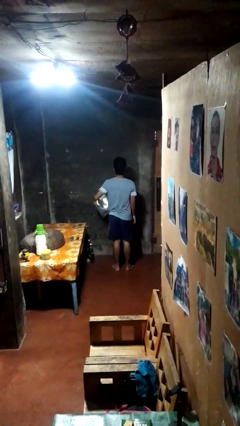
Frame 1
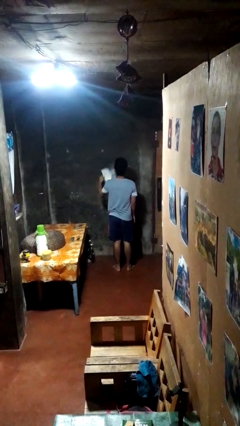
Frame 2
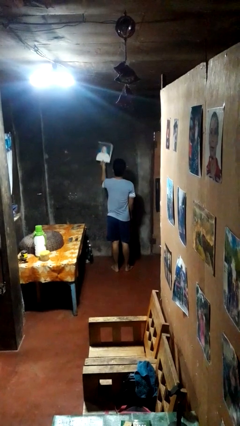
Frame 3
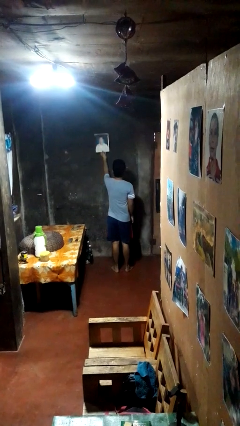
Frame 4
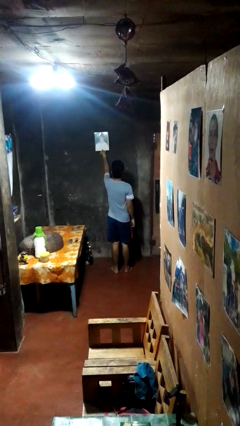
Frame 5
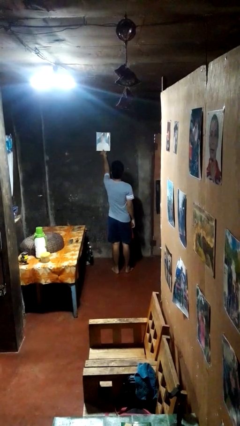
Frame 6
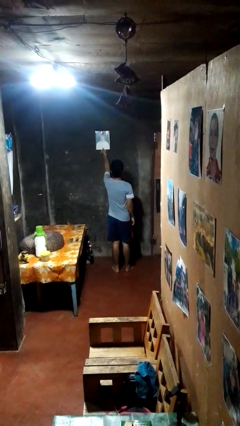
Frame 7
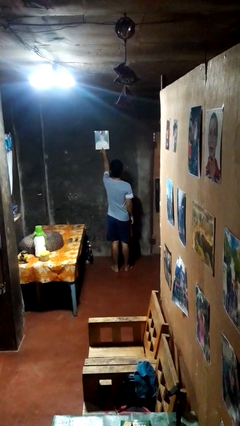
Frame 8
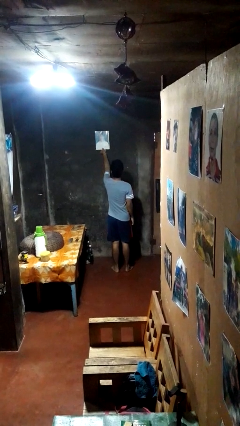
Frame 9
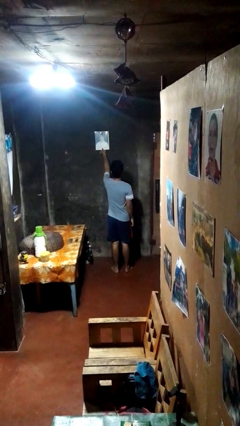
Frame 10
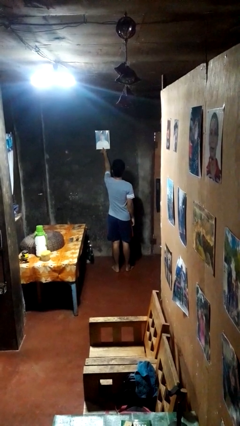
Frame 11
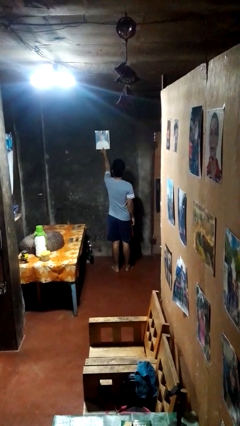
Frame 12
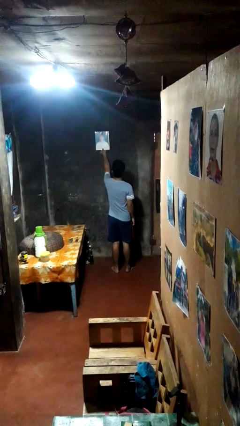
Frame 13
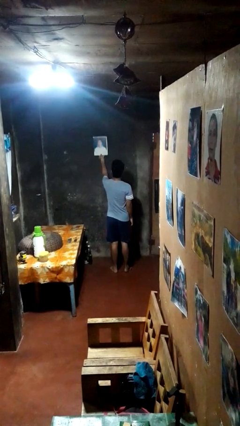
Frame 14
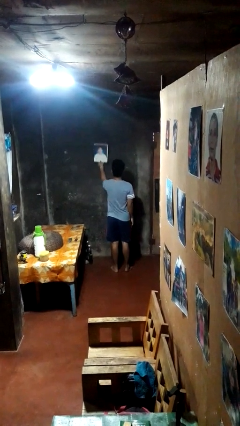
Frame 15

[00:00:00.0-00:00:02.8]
person puts up picture frame

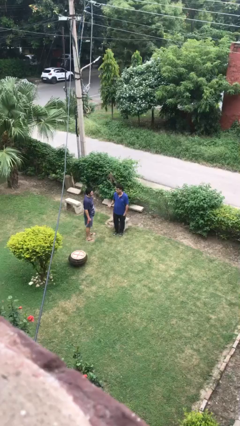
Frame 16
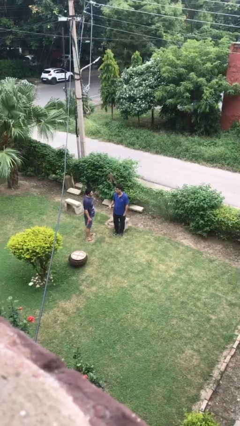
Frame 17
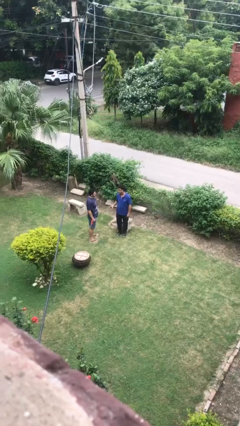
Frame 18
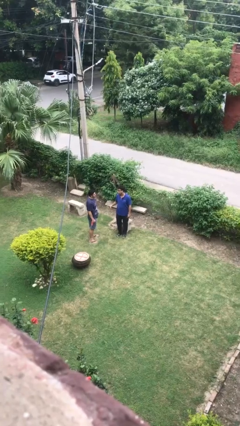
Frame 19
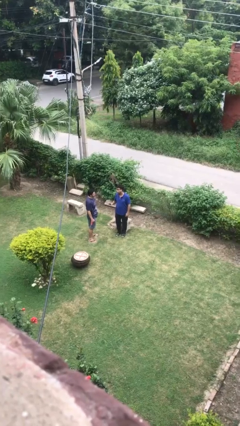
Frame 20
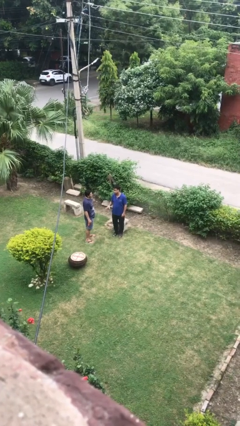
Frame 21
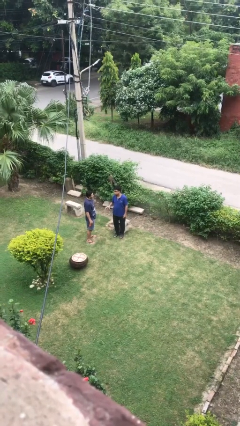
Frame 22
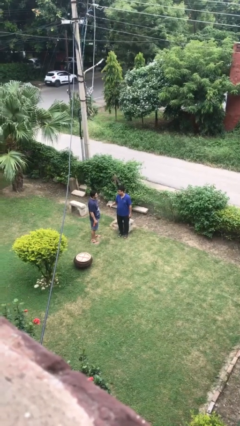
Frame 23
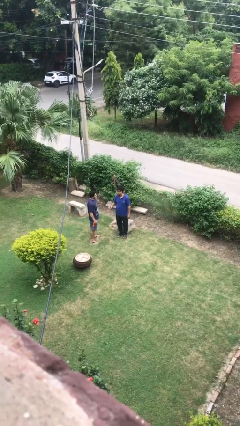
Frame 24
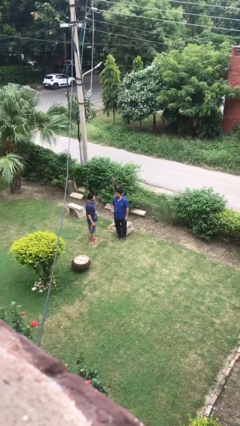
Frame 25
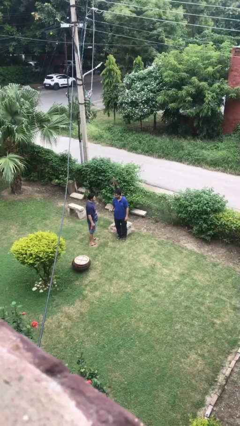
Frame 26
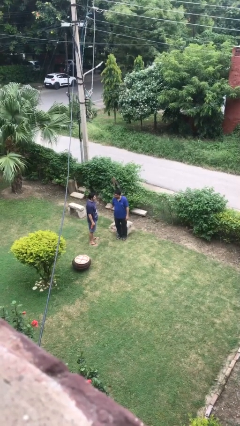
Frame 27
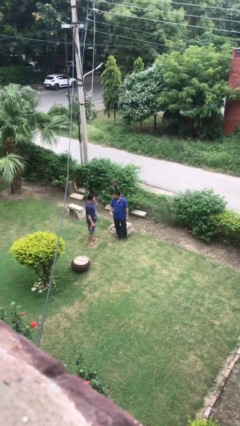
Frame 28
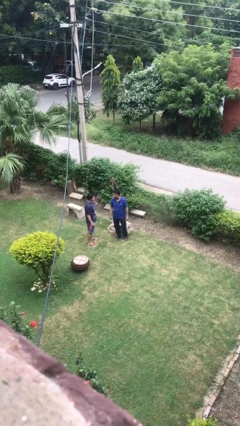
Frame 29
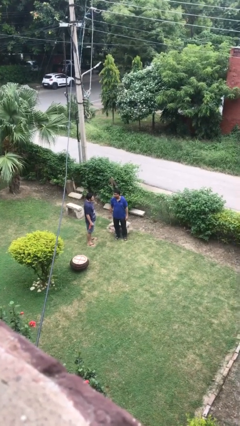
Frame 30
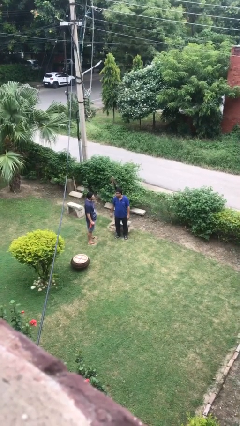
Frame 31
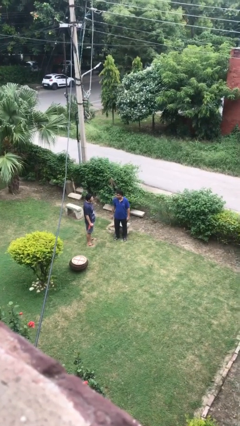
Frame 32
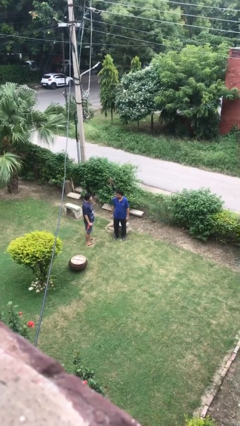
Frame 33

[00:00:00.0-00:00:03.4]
person talks to person

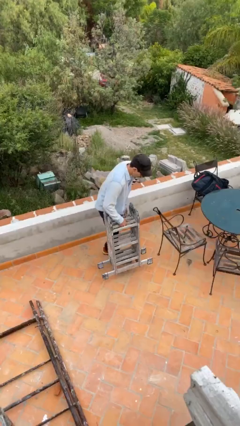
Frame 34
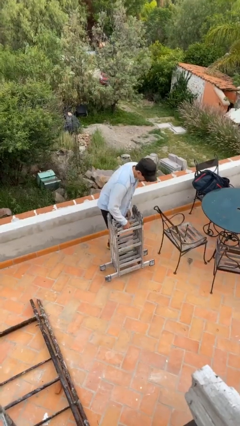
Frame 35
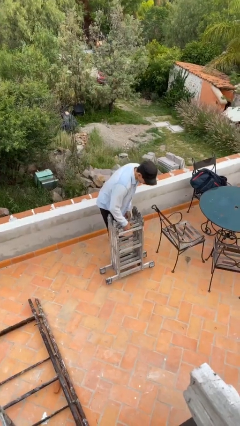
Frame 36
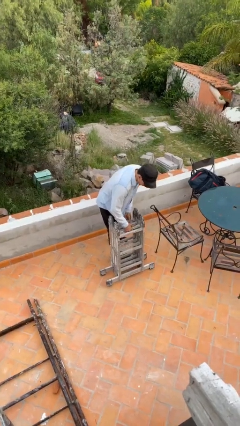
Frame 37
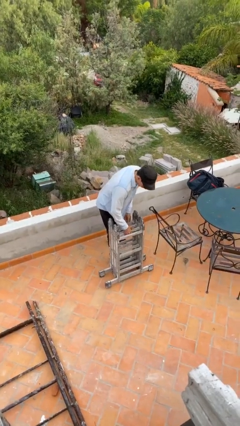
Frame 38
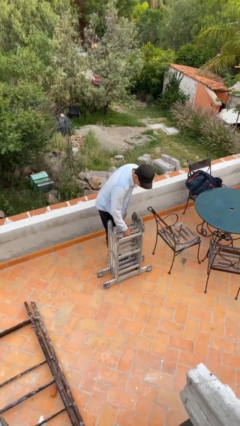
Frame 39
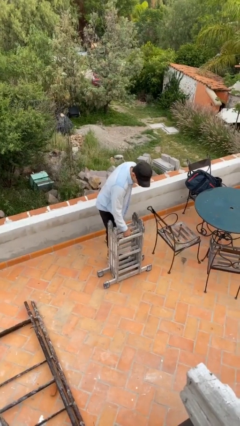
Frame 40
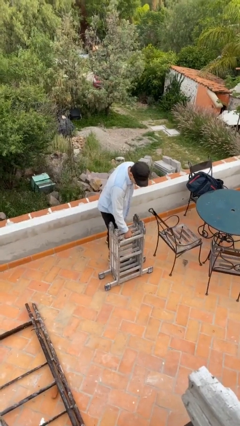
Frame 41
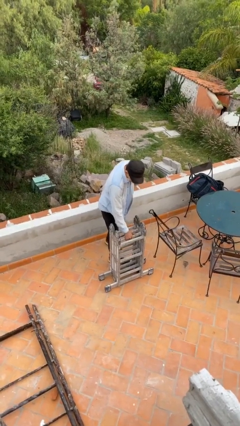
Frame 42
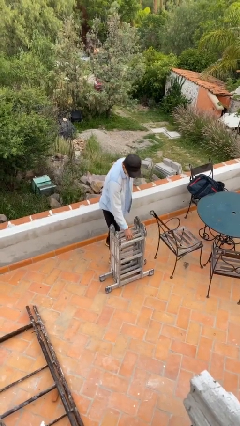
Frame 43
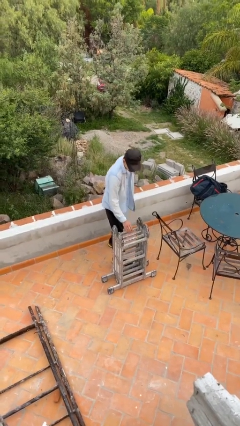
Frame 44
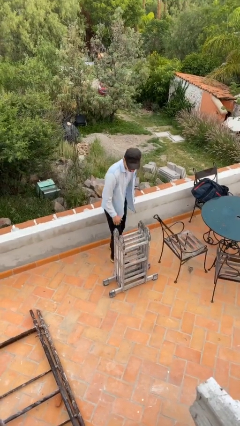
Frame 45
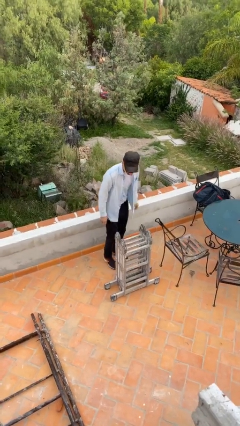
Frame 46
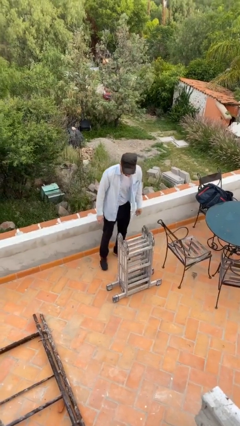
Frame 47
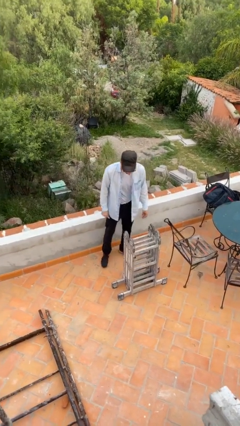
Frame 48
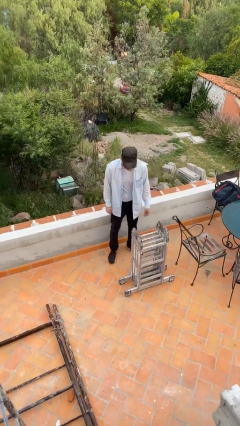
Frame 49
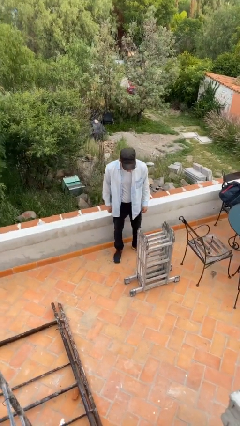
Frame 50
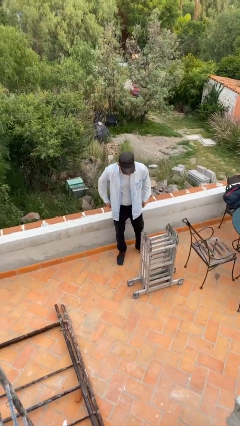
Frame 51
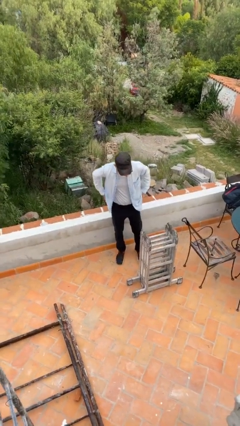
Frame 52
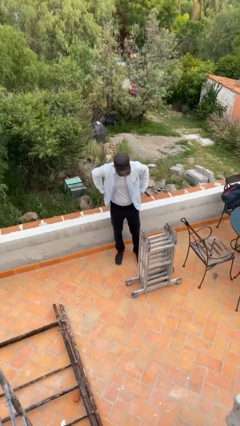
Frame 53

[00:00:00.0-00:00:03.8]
person puts down object on floor

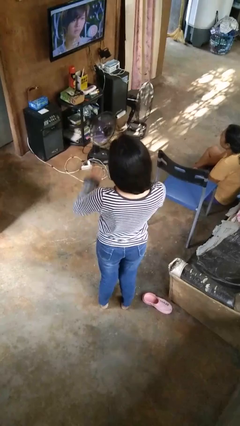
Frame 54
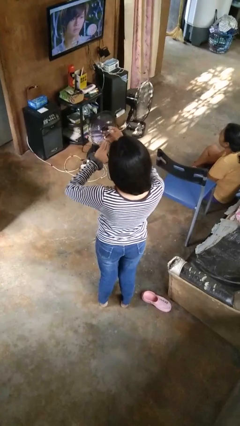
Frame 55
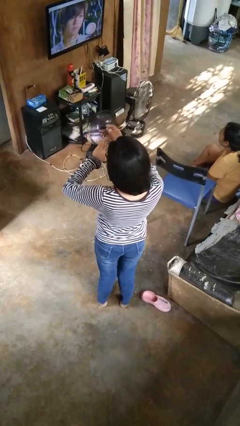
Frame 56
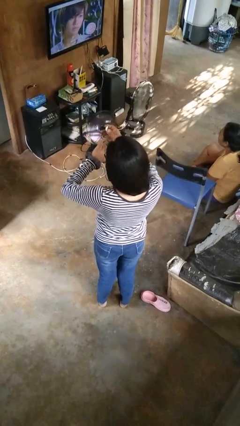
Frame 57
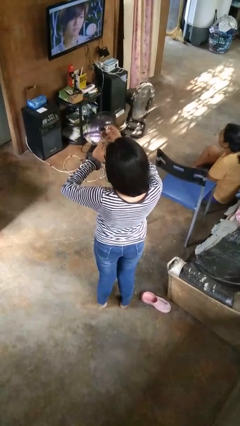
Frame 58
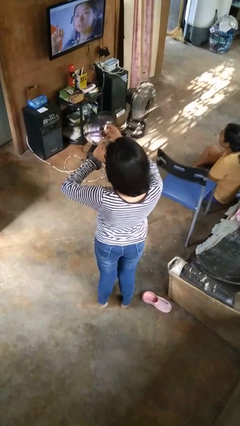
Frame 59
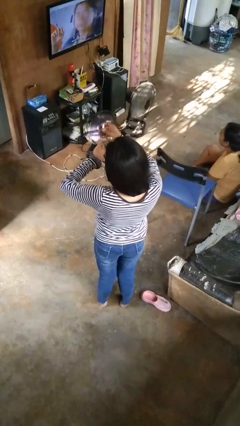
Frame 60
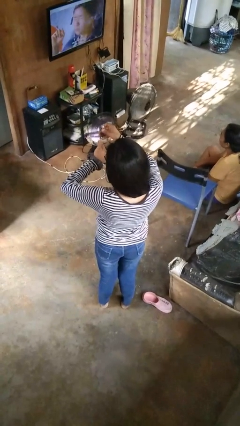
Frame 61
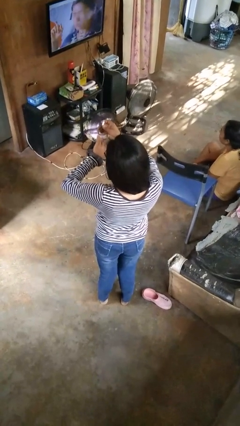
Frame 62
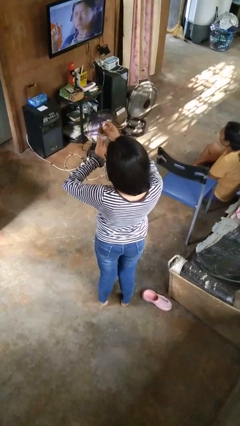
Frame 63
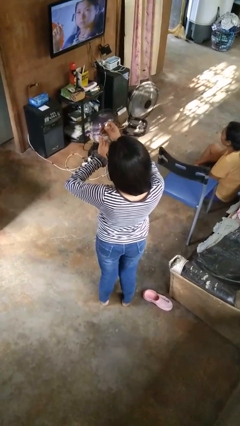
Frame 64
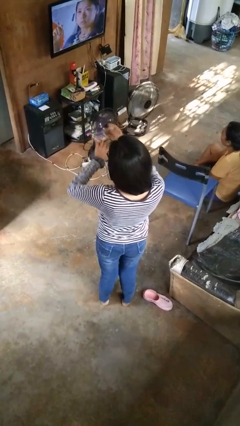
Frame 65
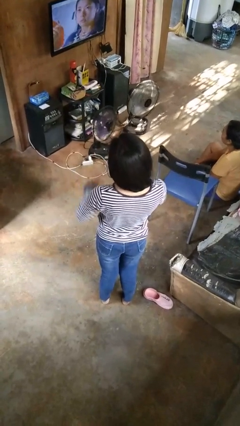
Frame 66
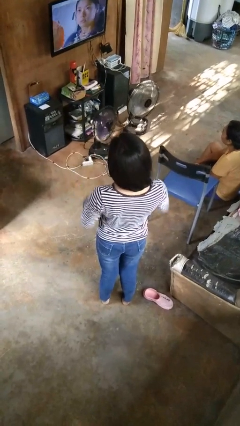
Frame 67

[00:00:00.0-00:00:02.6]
person clips fingernails

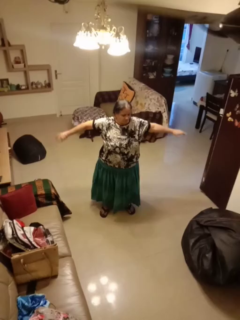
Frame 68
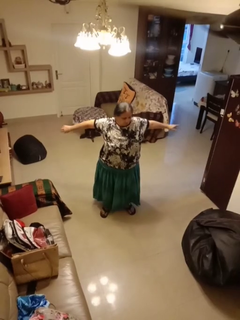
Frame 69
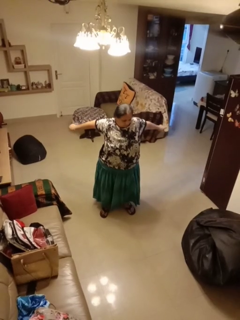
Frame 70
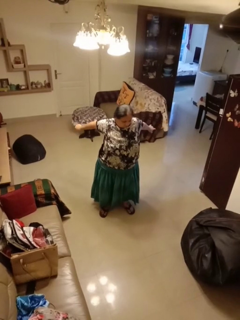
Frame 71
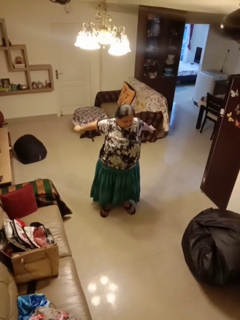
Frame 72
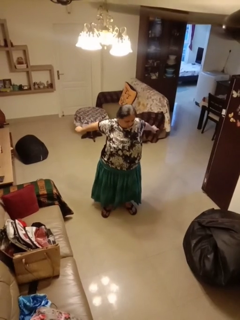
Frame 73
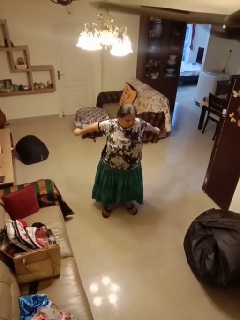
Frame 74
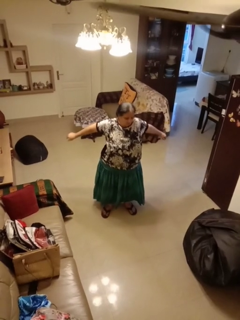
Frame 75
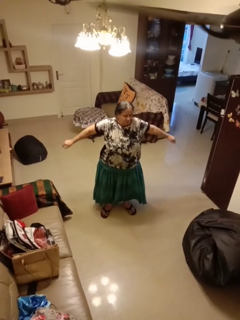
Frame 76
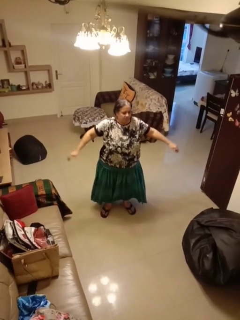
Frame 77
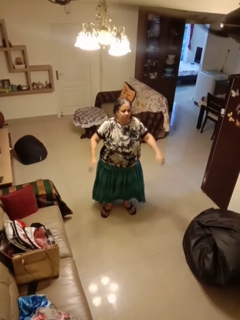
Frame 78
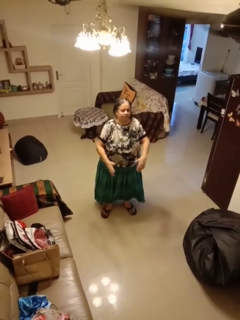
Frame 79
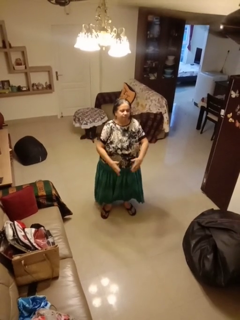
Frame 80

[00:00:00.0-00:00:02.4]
person stretches arms to side

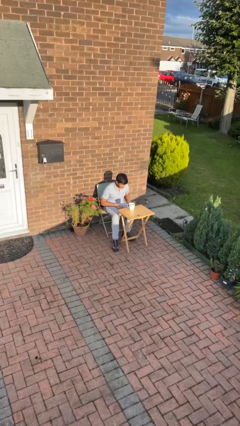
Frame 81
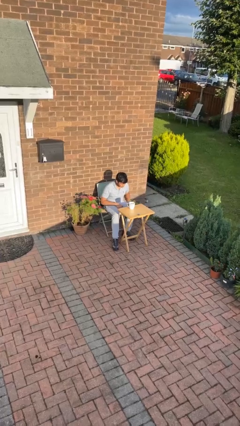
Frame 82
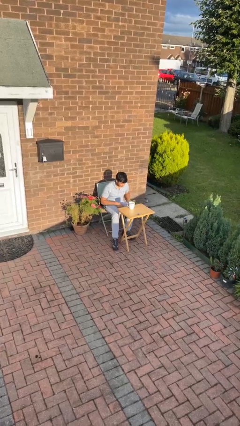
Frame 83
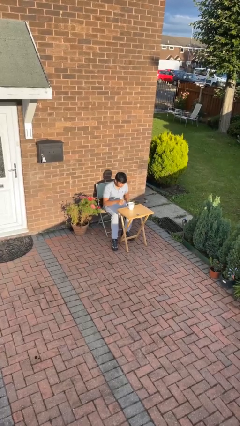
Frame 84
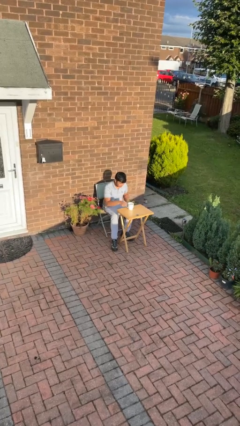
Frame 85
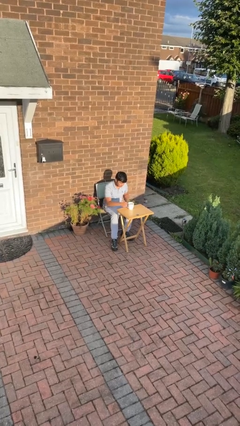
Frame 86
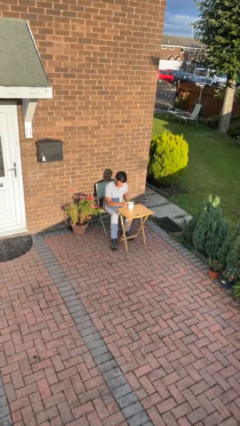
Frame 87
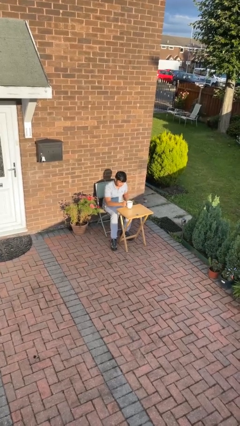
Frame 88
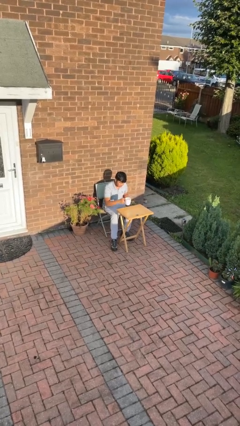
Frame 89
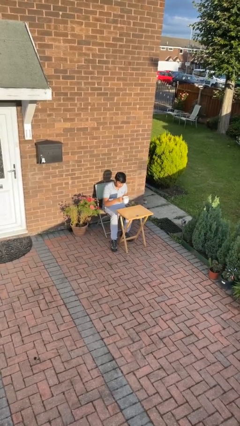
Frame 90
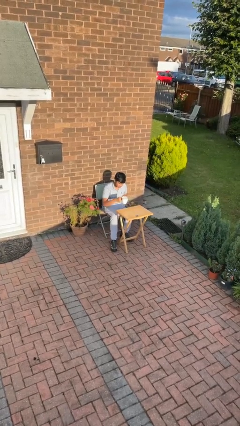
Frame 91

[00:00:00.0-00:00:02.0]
person picks up object from table

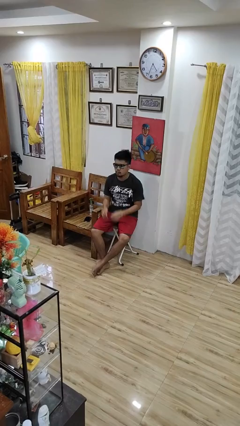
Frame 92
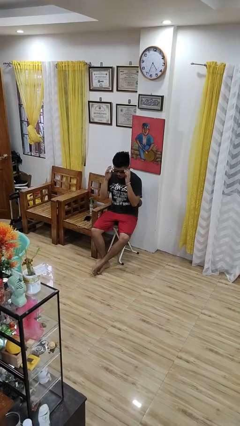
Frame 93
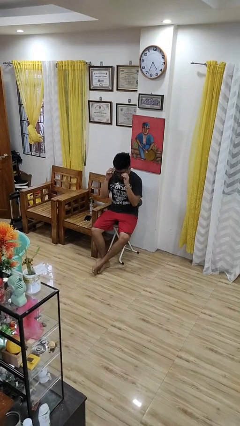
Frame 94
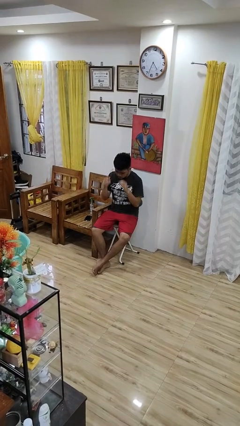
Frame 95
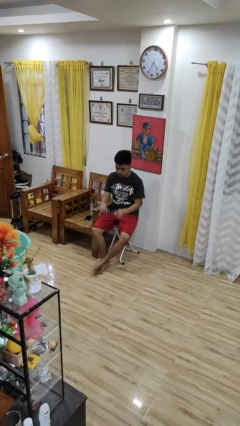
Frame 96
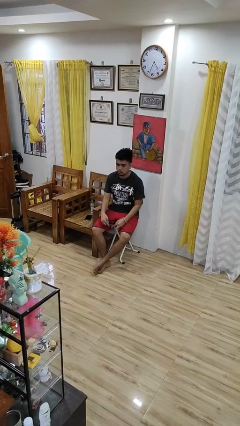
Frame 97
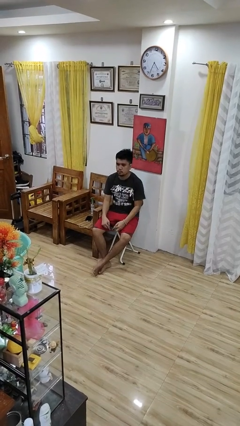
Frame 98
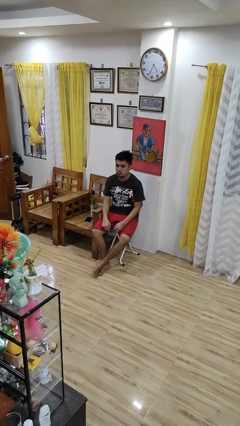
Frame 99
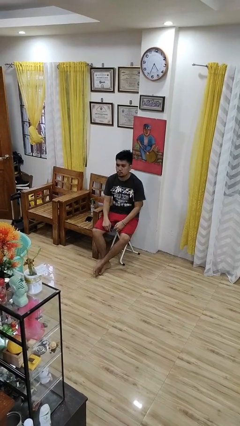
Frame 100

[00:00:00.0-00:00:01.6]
person takes off sunglasses
